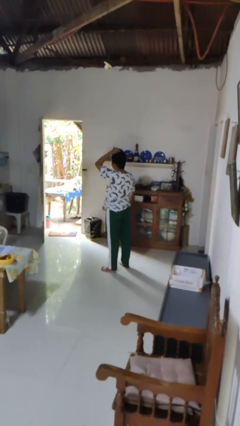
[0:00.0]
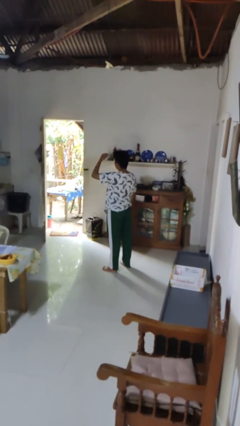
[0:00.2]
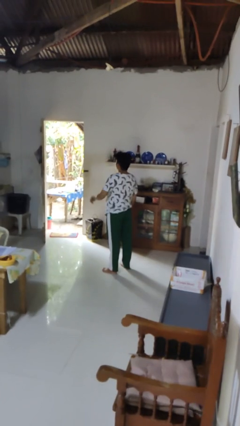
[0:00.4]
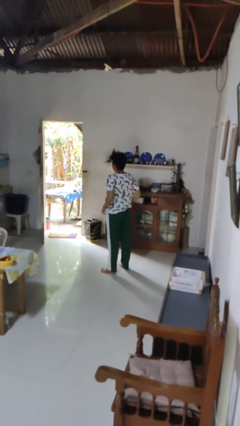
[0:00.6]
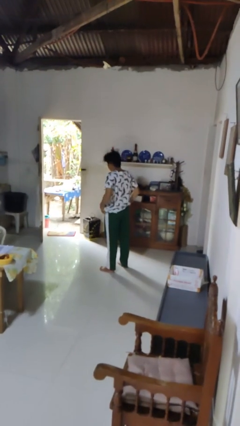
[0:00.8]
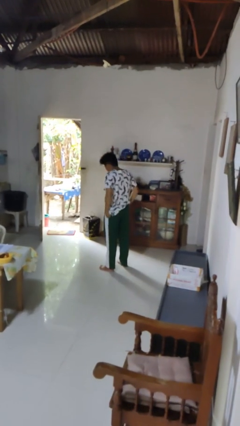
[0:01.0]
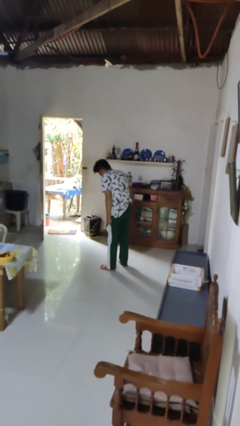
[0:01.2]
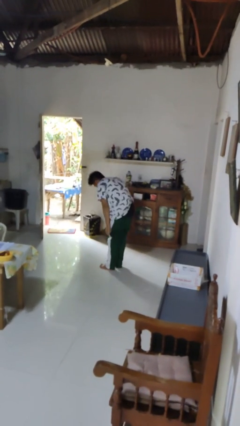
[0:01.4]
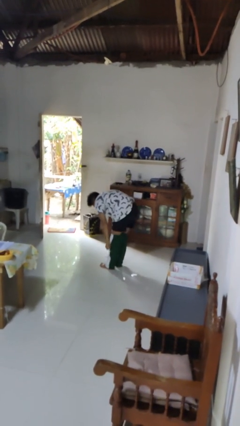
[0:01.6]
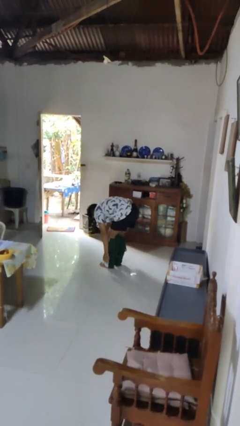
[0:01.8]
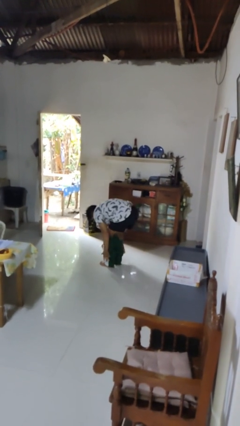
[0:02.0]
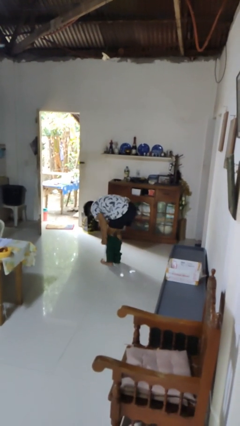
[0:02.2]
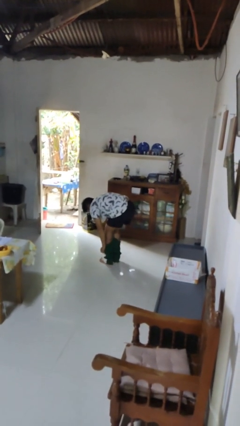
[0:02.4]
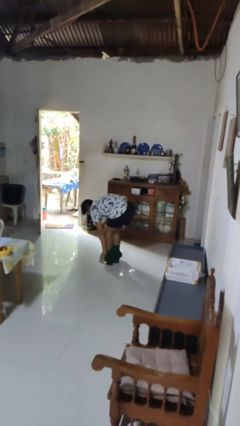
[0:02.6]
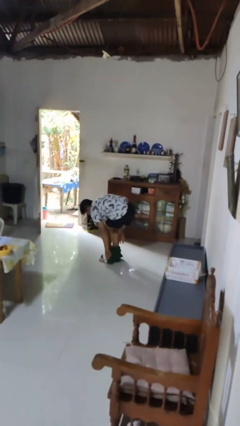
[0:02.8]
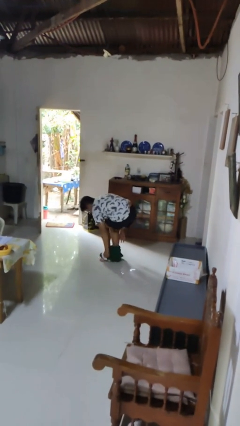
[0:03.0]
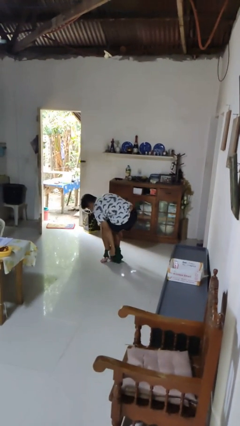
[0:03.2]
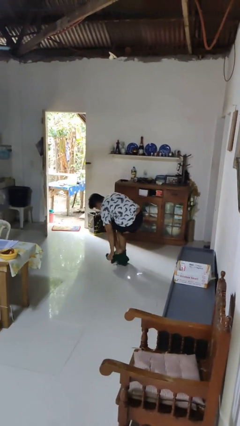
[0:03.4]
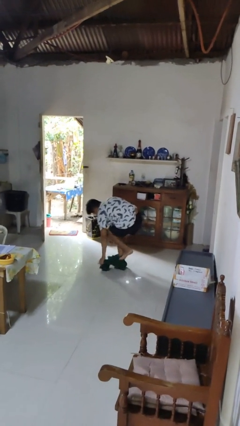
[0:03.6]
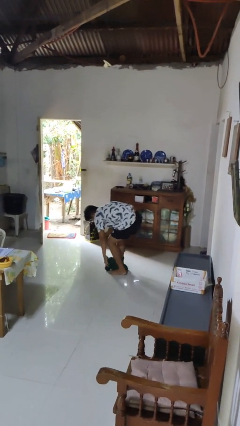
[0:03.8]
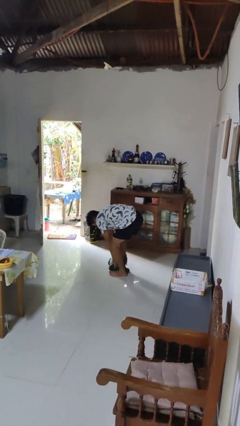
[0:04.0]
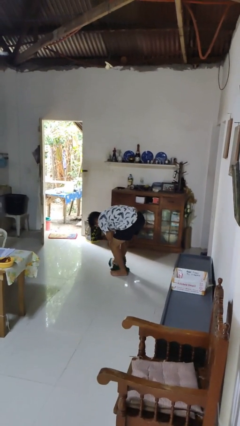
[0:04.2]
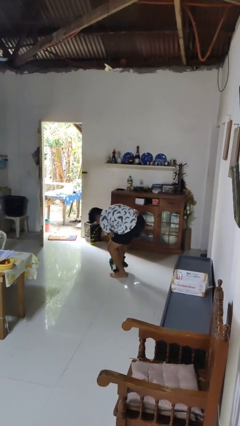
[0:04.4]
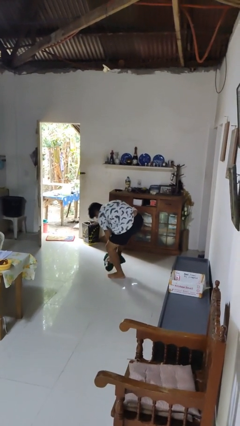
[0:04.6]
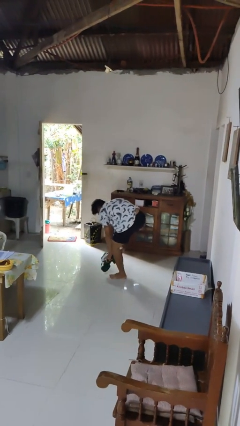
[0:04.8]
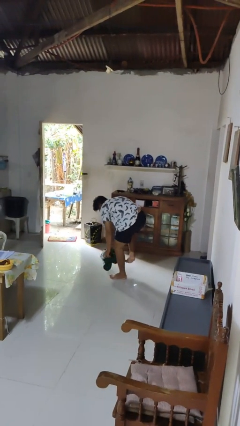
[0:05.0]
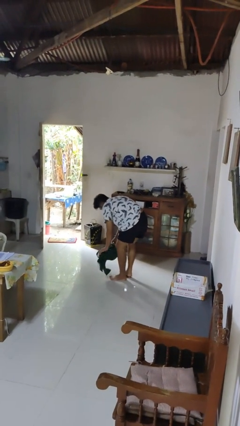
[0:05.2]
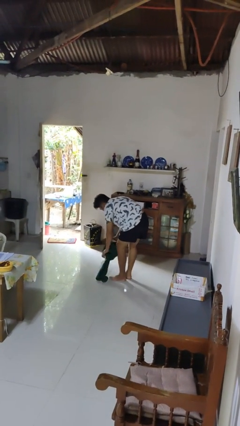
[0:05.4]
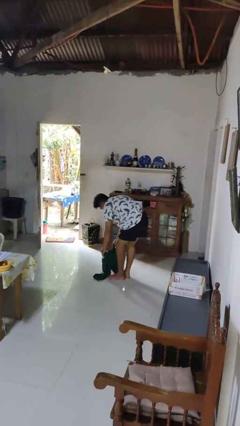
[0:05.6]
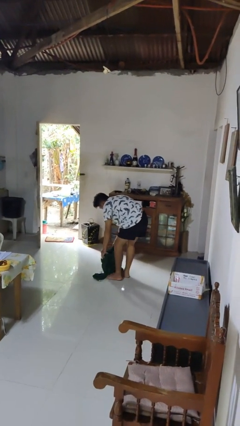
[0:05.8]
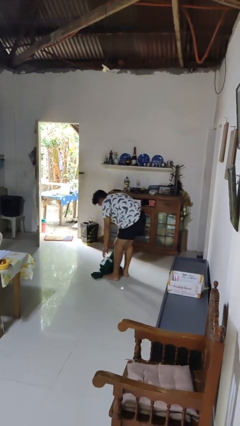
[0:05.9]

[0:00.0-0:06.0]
person takes off pants

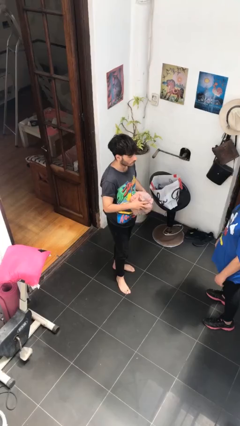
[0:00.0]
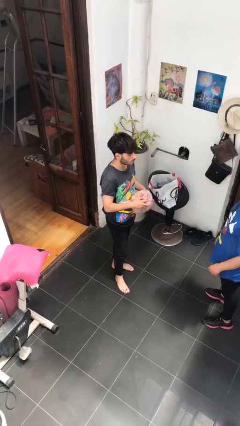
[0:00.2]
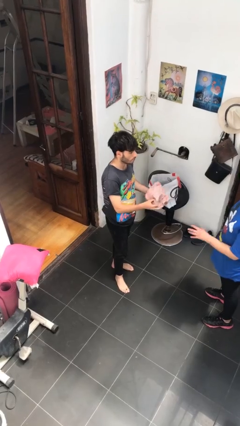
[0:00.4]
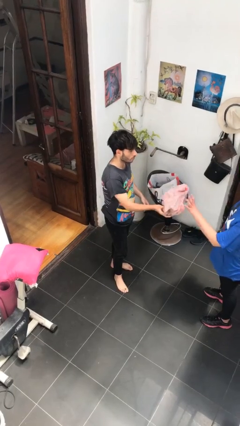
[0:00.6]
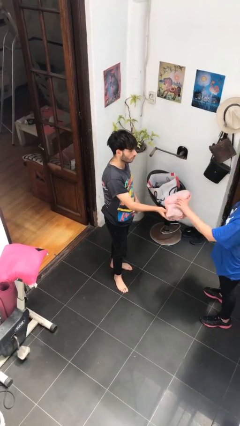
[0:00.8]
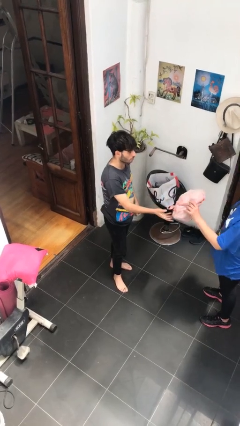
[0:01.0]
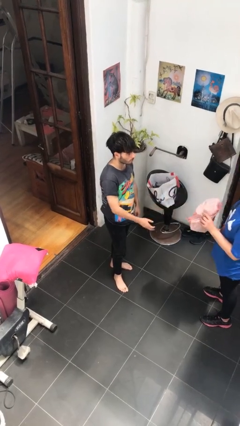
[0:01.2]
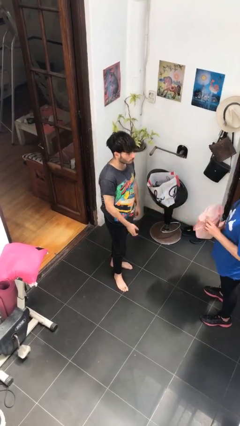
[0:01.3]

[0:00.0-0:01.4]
person transfers object to person

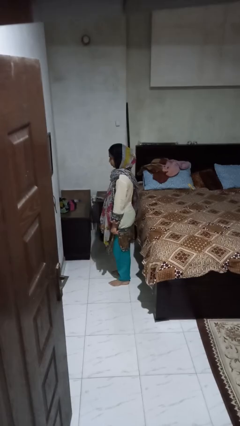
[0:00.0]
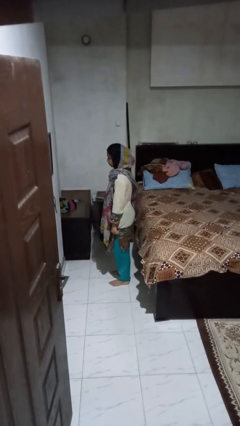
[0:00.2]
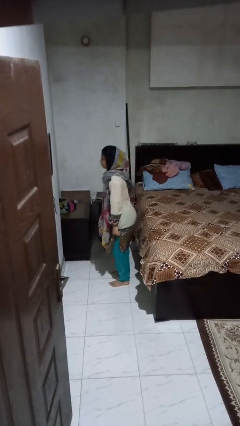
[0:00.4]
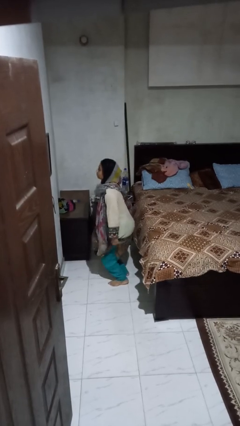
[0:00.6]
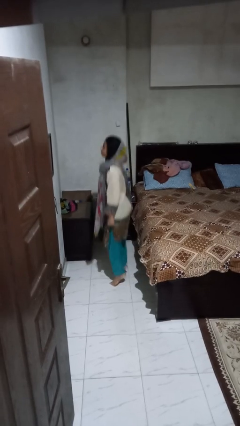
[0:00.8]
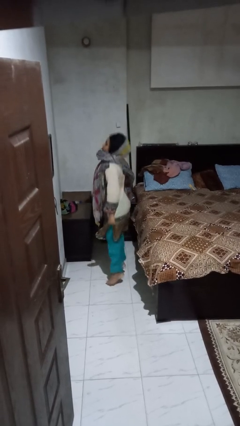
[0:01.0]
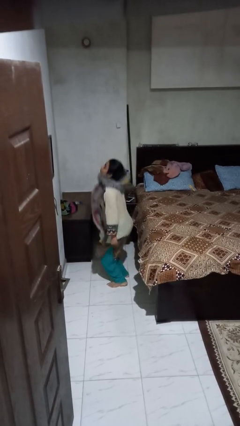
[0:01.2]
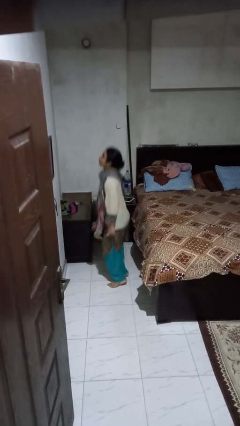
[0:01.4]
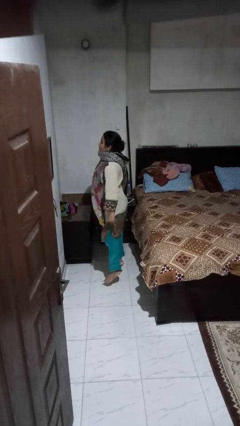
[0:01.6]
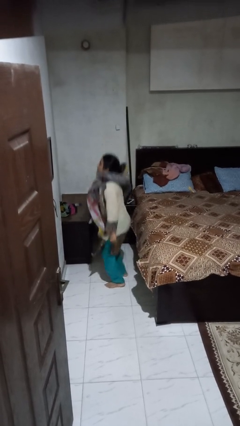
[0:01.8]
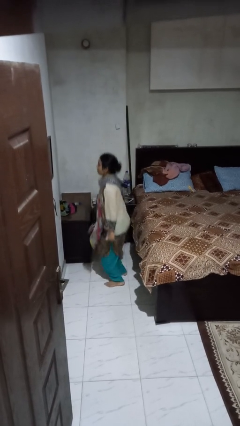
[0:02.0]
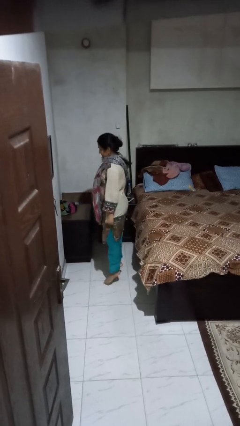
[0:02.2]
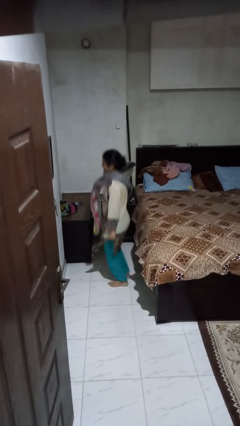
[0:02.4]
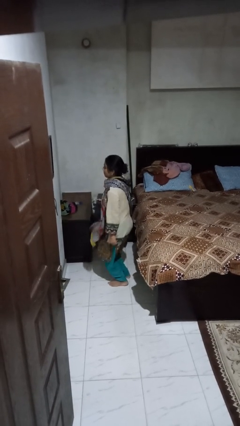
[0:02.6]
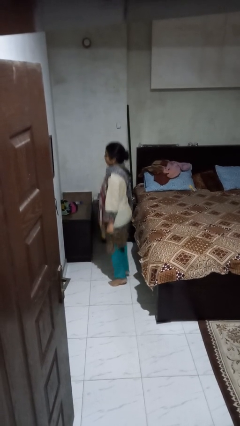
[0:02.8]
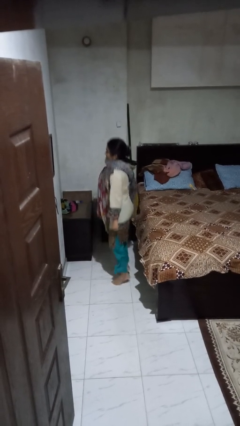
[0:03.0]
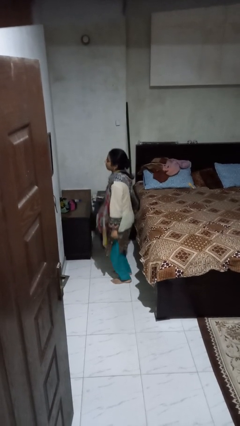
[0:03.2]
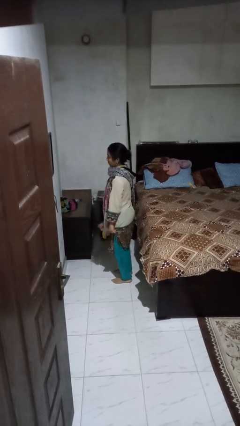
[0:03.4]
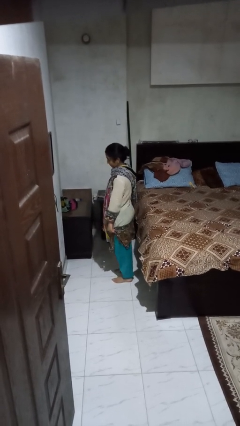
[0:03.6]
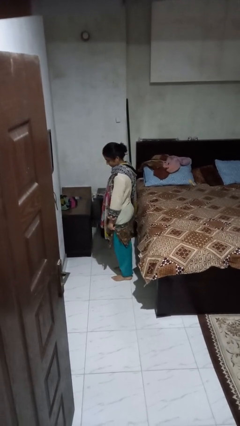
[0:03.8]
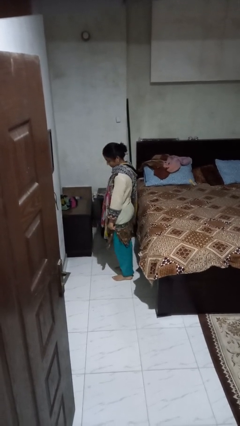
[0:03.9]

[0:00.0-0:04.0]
person jumps

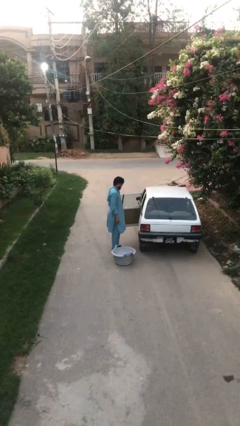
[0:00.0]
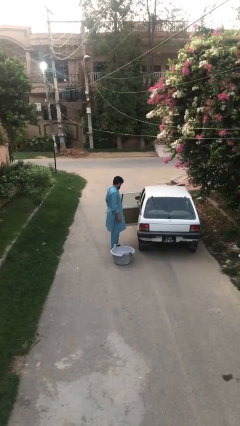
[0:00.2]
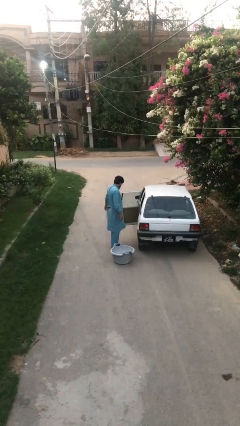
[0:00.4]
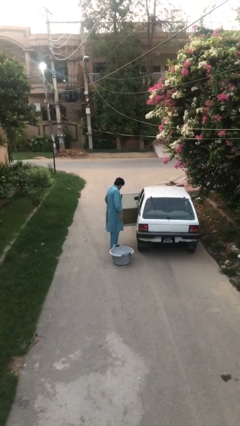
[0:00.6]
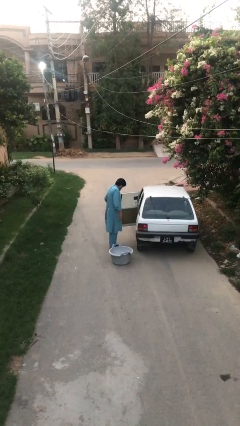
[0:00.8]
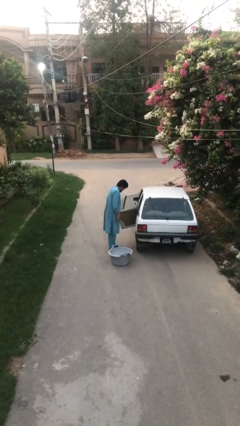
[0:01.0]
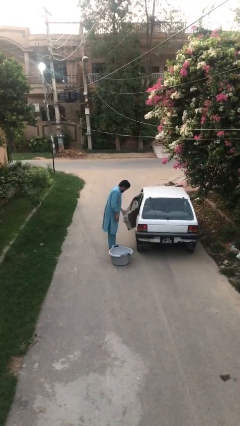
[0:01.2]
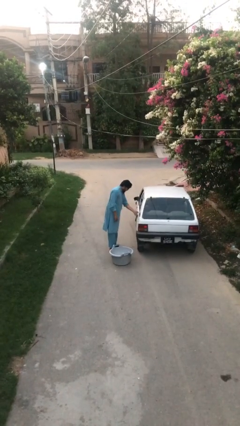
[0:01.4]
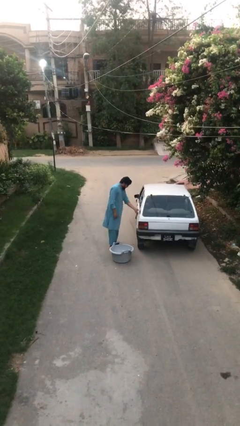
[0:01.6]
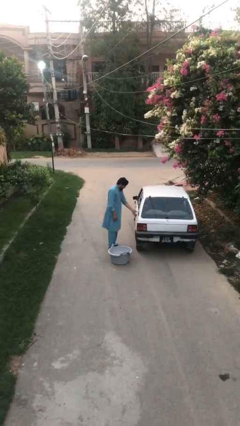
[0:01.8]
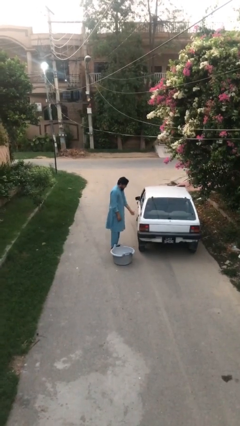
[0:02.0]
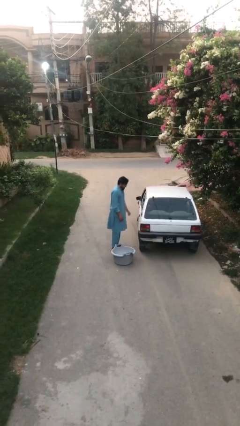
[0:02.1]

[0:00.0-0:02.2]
person closes car door

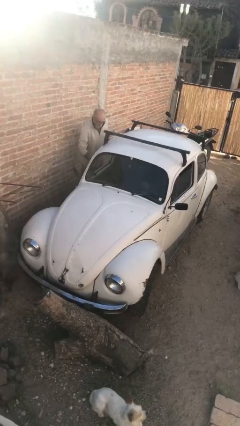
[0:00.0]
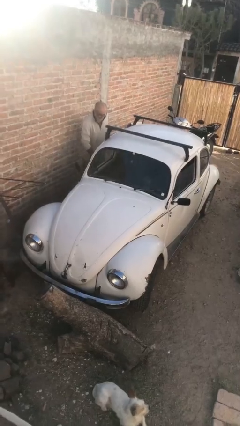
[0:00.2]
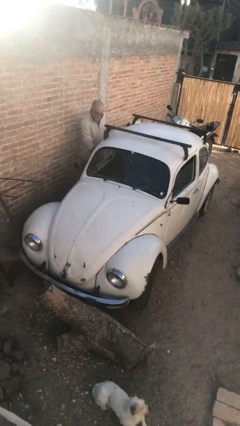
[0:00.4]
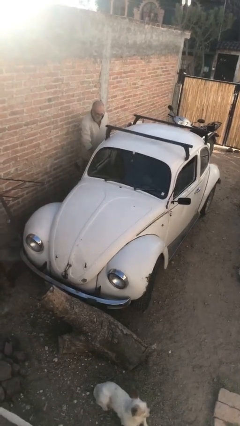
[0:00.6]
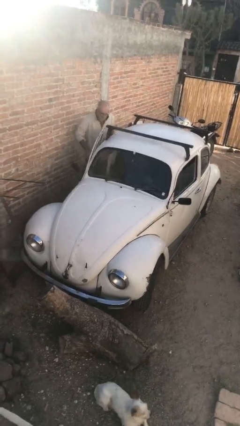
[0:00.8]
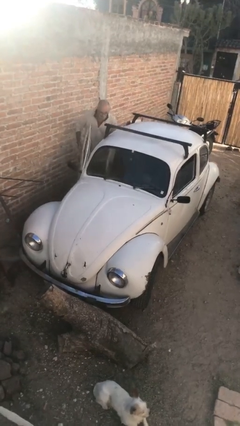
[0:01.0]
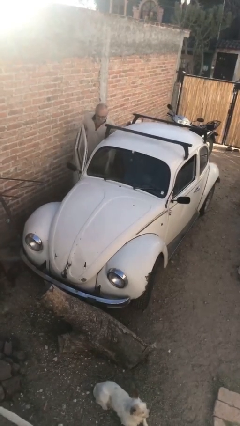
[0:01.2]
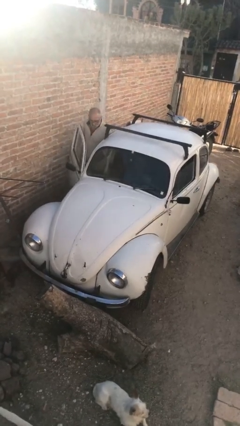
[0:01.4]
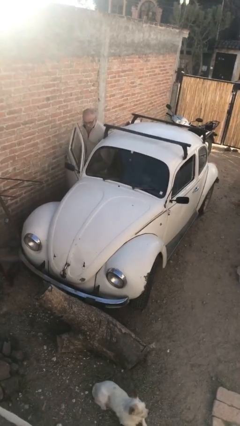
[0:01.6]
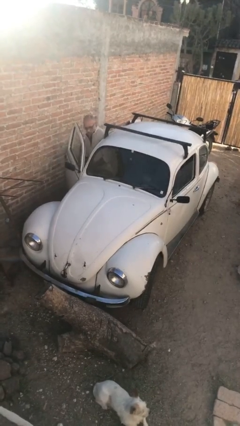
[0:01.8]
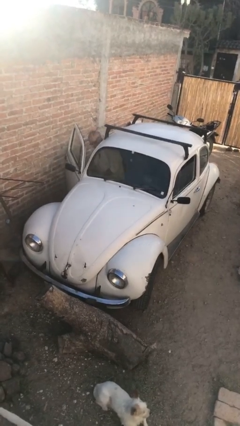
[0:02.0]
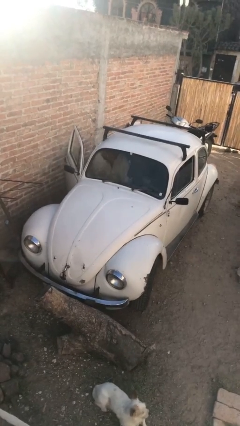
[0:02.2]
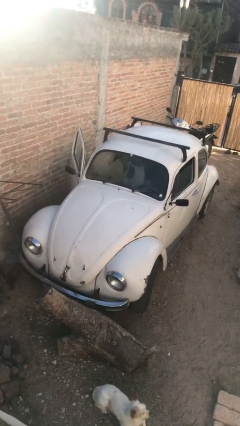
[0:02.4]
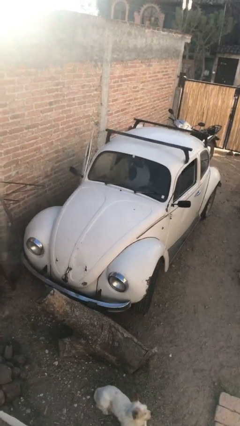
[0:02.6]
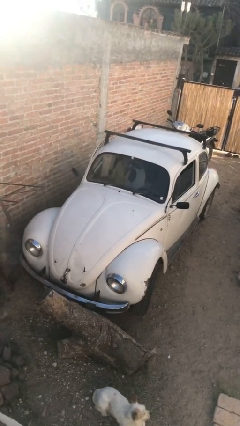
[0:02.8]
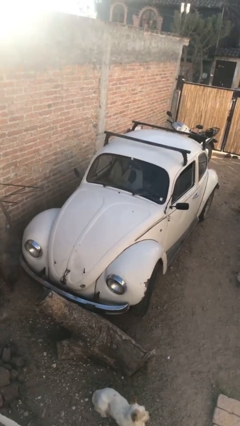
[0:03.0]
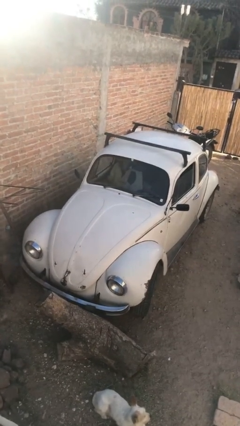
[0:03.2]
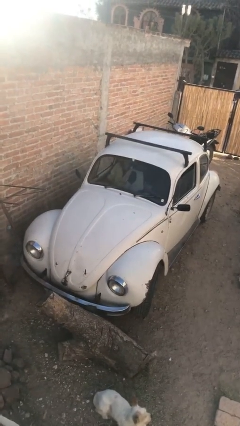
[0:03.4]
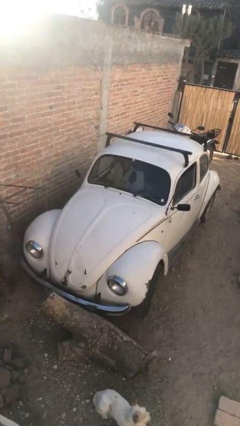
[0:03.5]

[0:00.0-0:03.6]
car picks up person
